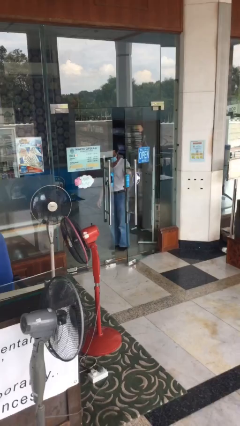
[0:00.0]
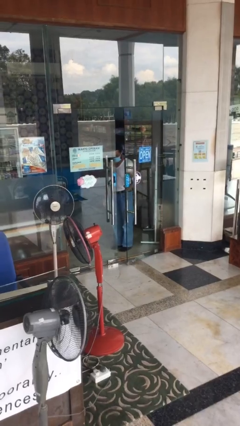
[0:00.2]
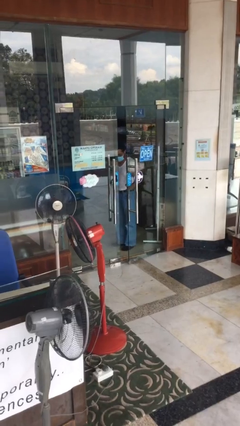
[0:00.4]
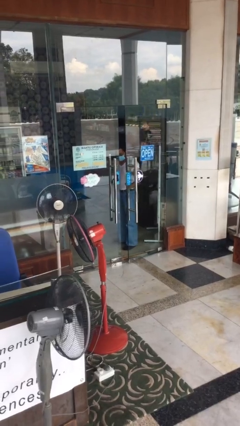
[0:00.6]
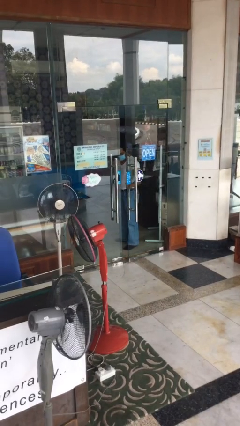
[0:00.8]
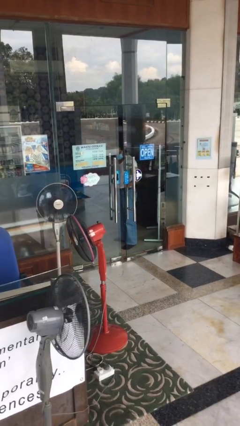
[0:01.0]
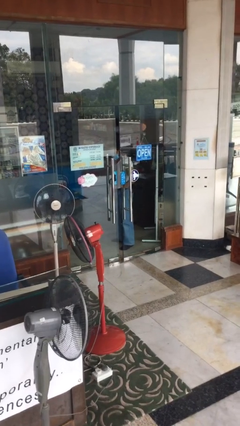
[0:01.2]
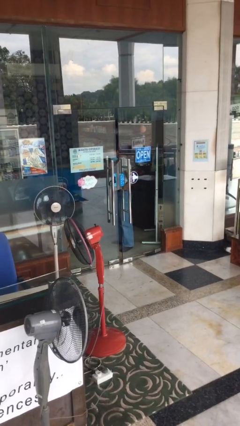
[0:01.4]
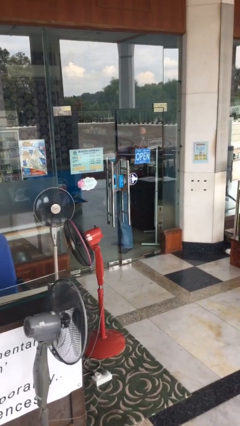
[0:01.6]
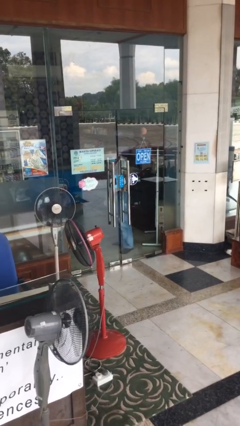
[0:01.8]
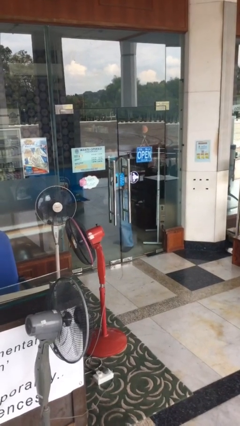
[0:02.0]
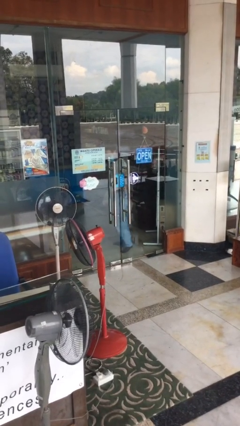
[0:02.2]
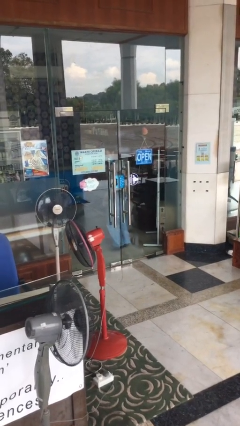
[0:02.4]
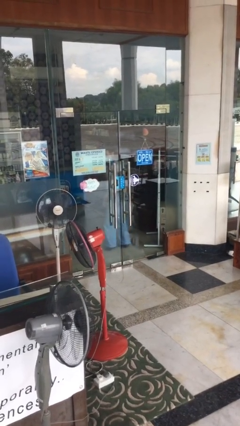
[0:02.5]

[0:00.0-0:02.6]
person closes facility door

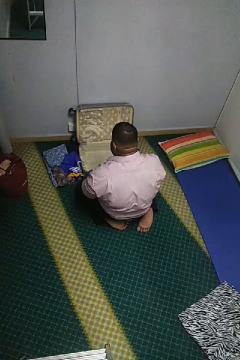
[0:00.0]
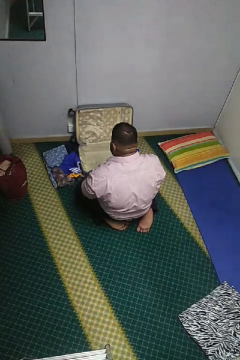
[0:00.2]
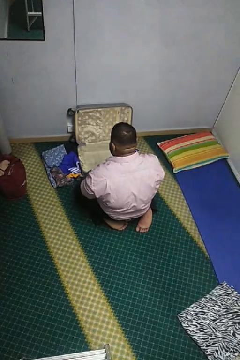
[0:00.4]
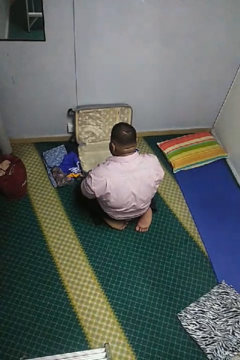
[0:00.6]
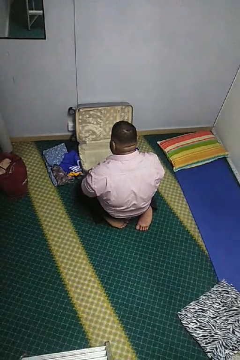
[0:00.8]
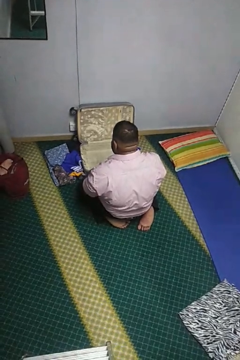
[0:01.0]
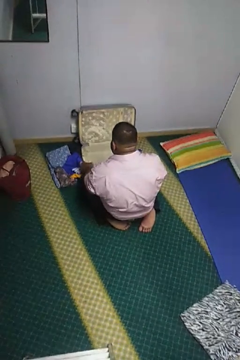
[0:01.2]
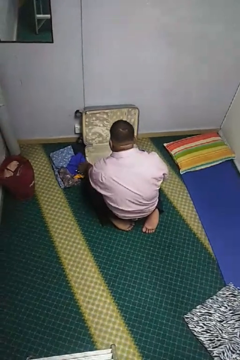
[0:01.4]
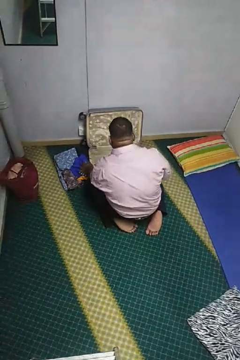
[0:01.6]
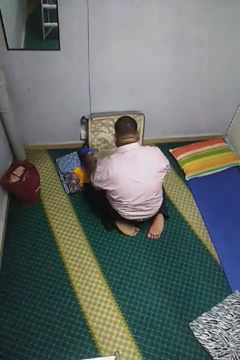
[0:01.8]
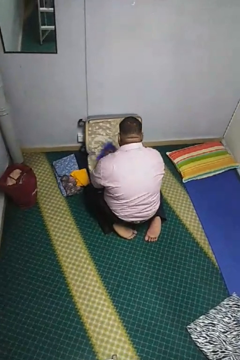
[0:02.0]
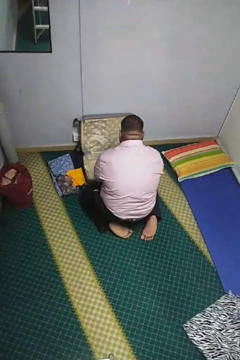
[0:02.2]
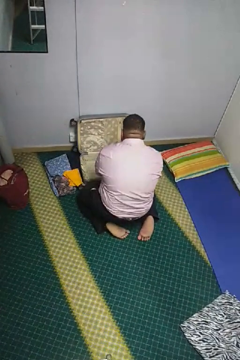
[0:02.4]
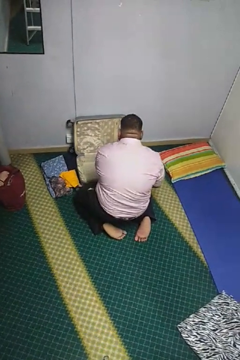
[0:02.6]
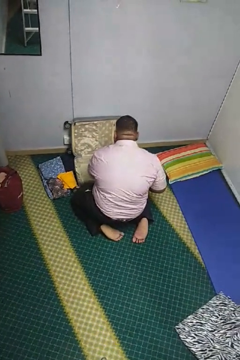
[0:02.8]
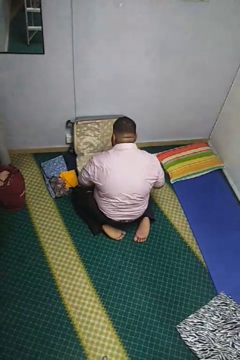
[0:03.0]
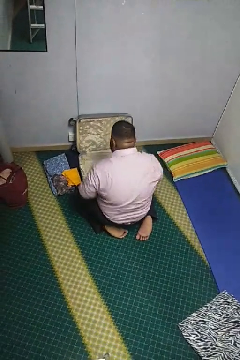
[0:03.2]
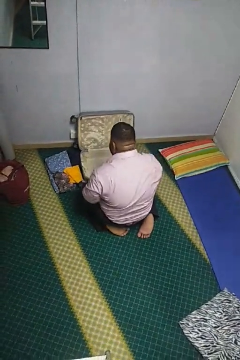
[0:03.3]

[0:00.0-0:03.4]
person loads clothes into suitcase

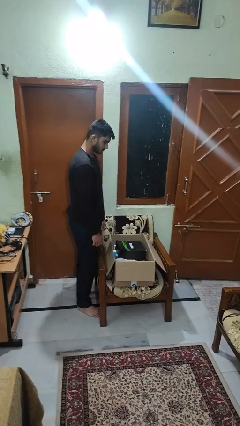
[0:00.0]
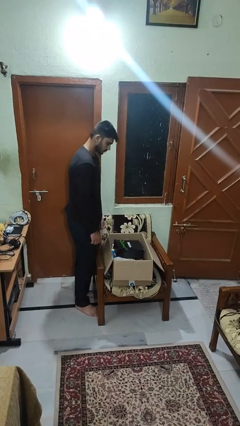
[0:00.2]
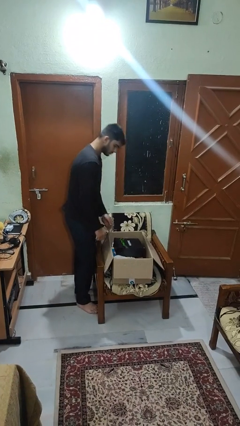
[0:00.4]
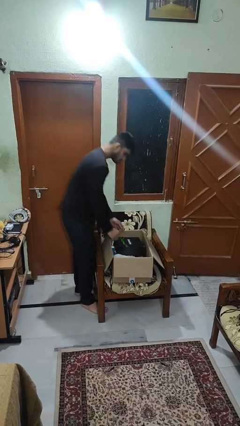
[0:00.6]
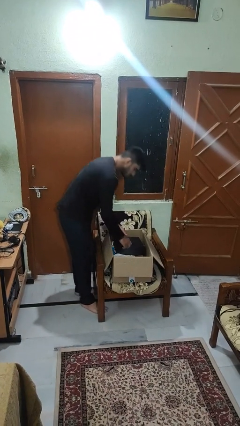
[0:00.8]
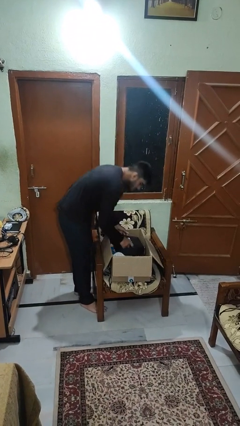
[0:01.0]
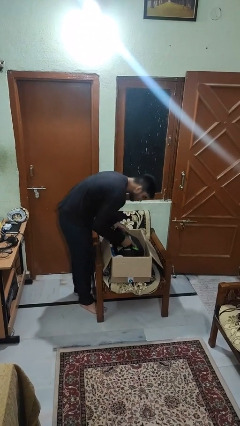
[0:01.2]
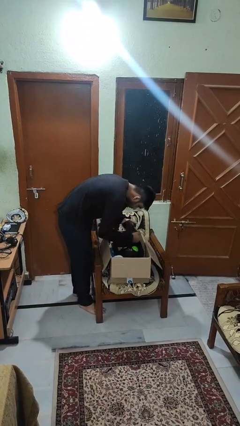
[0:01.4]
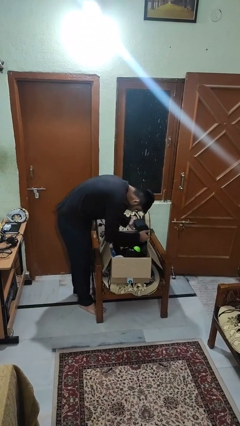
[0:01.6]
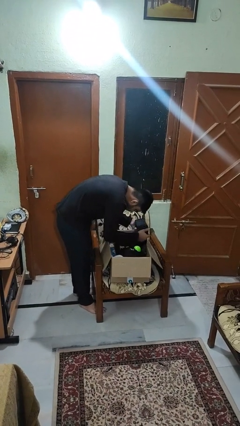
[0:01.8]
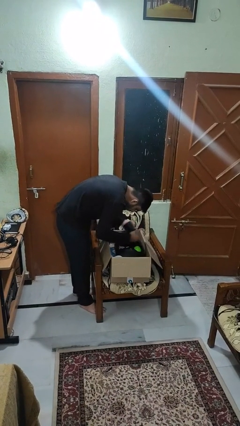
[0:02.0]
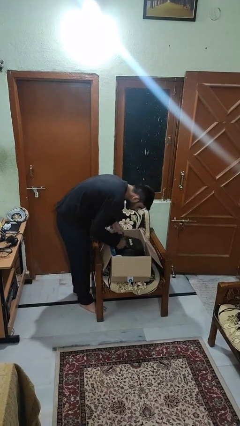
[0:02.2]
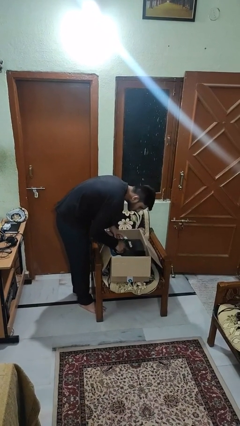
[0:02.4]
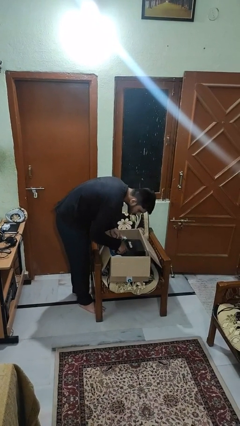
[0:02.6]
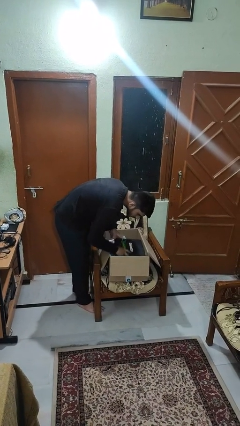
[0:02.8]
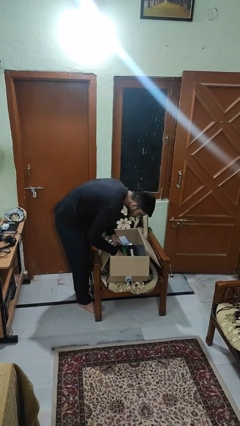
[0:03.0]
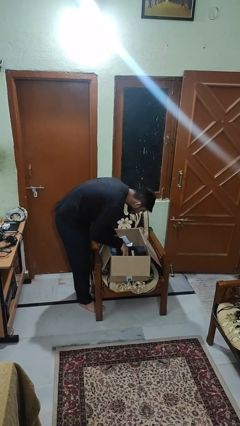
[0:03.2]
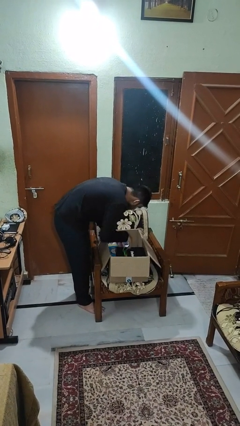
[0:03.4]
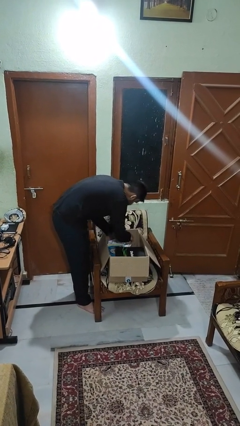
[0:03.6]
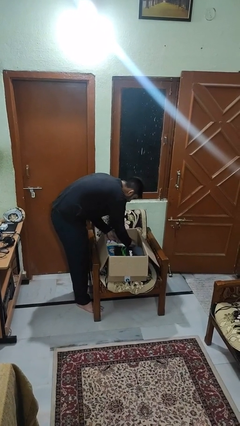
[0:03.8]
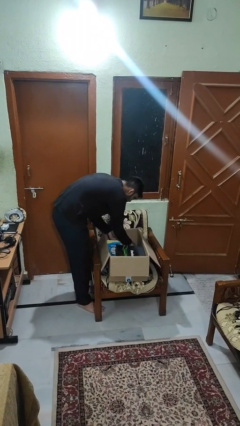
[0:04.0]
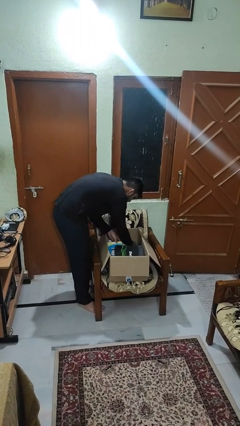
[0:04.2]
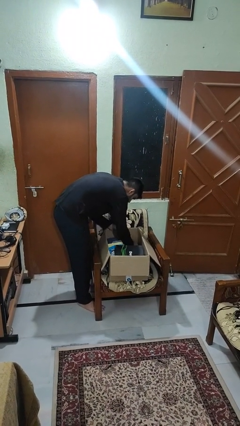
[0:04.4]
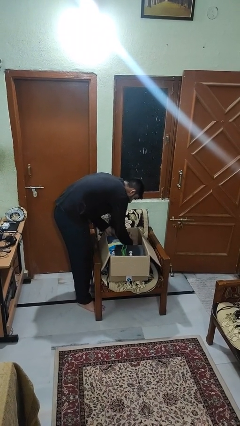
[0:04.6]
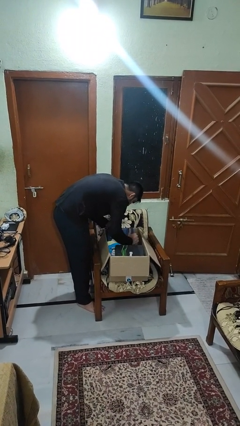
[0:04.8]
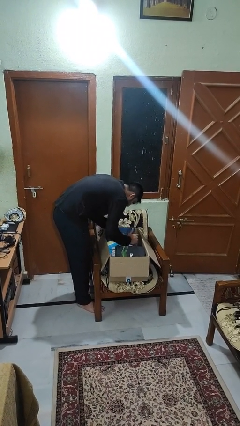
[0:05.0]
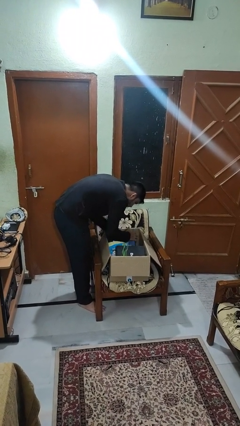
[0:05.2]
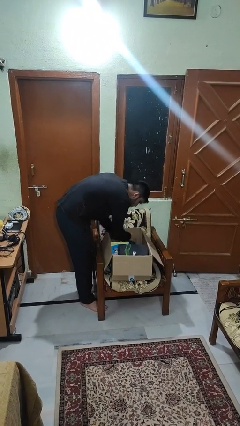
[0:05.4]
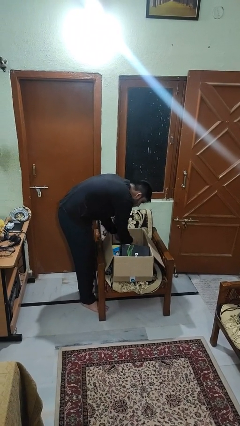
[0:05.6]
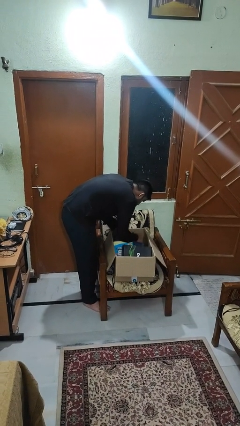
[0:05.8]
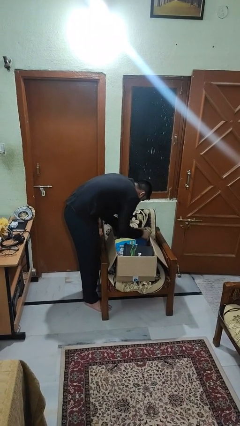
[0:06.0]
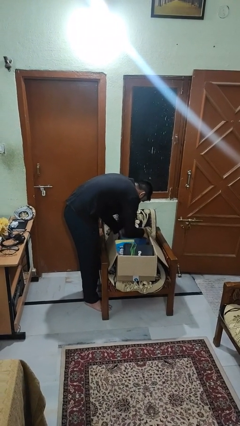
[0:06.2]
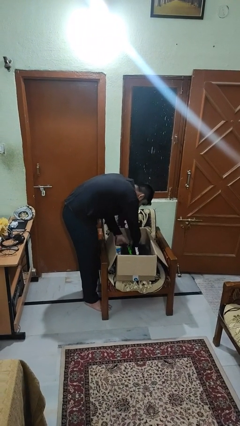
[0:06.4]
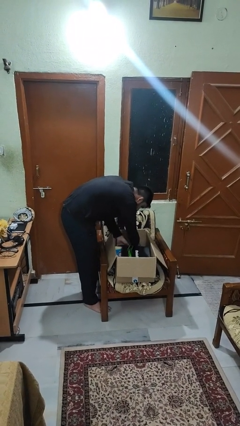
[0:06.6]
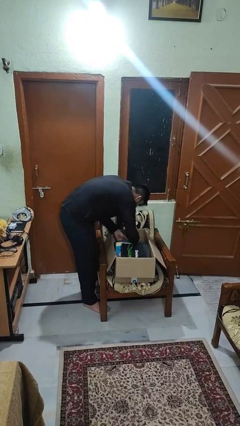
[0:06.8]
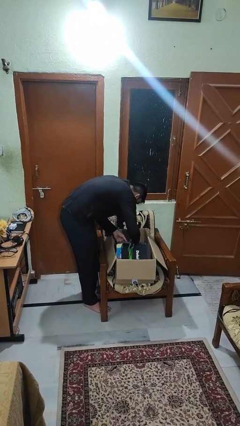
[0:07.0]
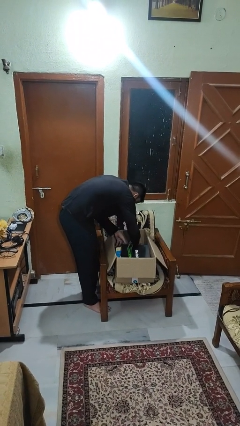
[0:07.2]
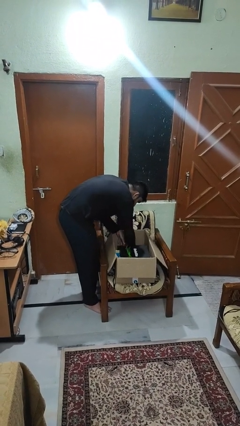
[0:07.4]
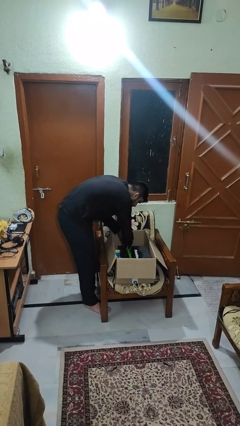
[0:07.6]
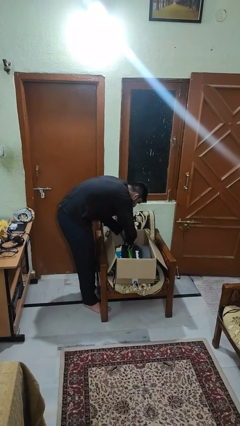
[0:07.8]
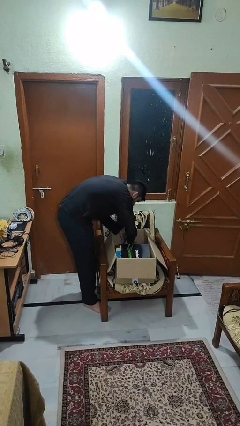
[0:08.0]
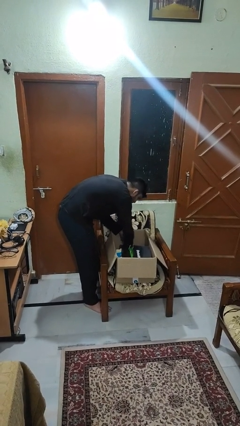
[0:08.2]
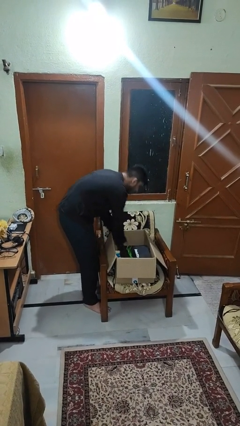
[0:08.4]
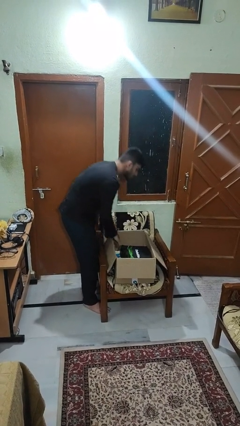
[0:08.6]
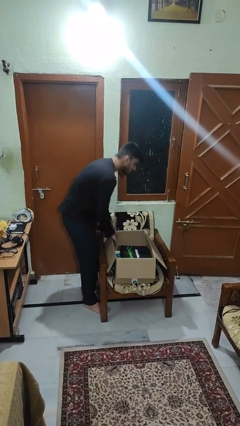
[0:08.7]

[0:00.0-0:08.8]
person searches in box

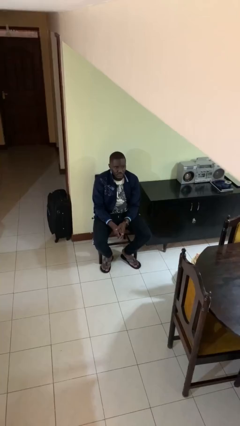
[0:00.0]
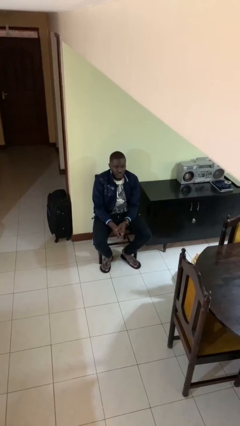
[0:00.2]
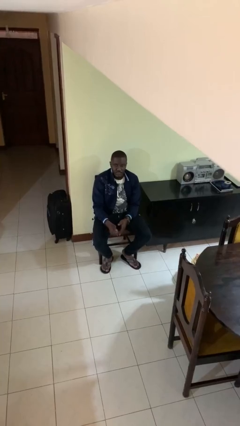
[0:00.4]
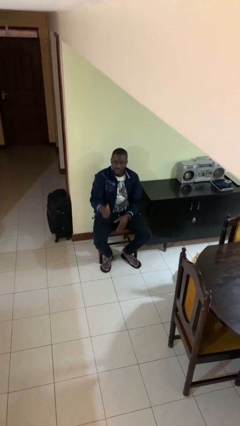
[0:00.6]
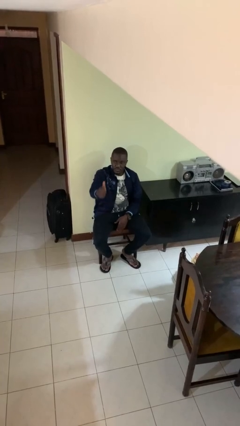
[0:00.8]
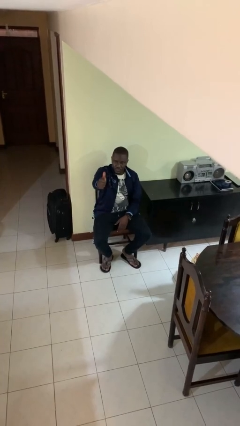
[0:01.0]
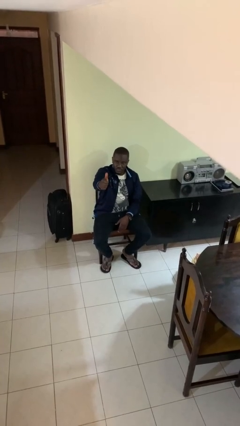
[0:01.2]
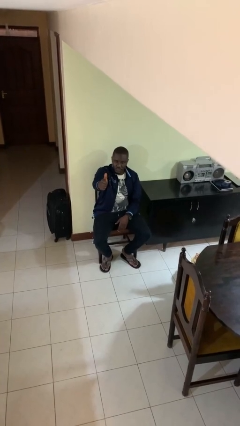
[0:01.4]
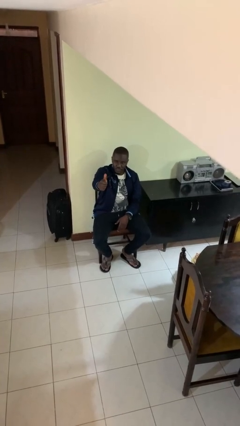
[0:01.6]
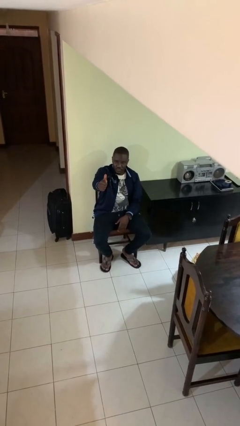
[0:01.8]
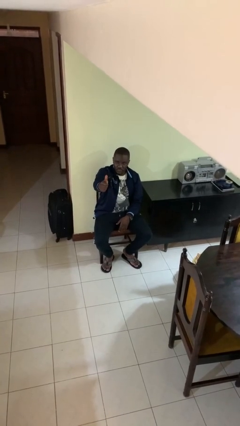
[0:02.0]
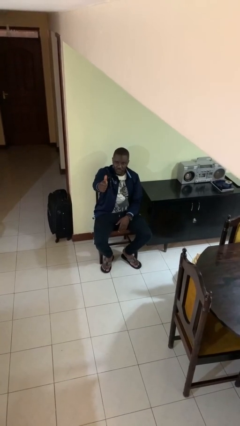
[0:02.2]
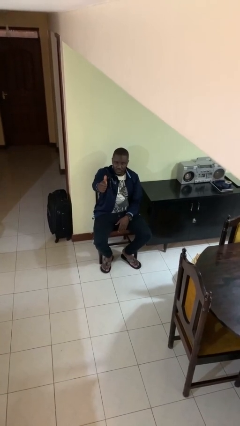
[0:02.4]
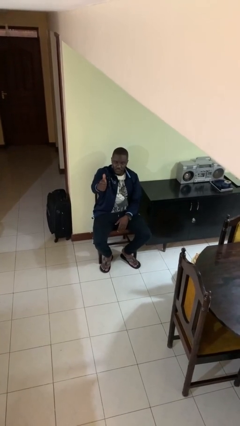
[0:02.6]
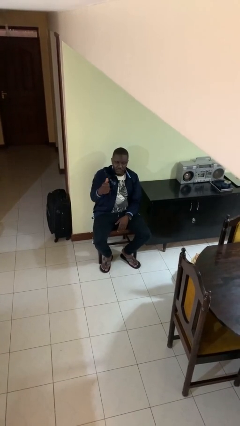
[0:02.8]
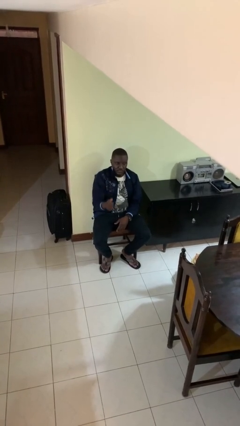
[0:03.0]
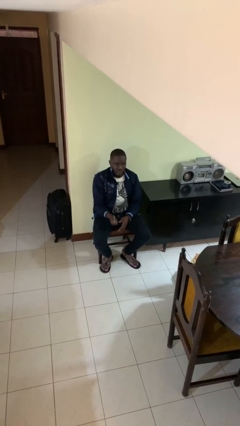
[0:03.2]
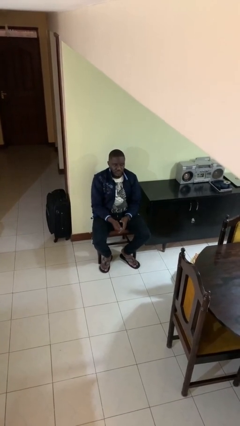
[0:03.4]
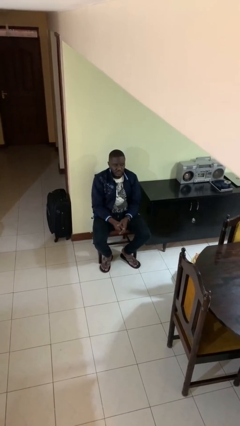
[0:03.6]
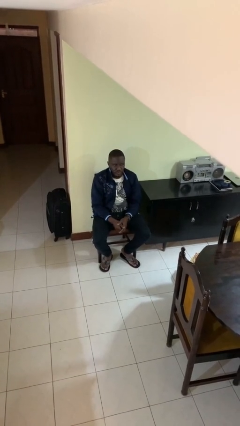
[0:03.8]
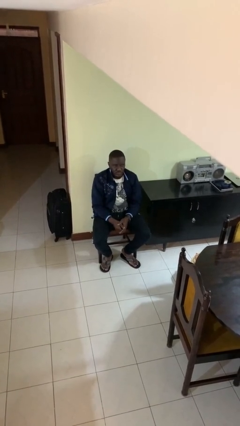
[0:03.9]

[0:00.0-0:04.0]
person gestures thumbs up
